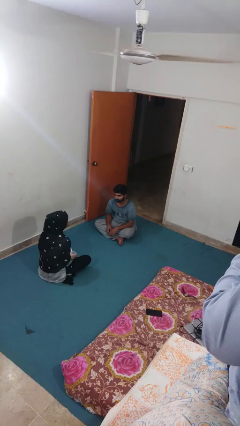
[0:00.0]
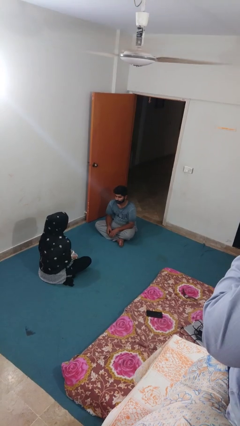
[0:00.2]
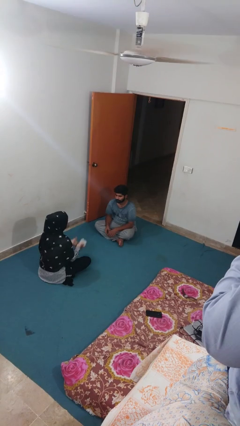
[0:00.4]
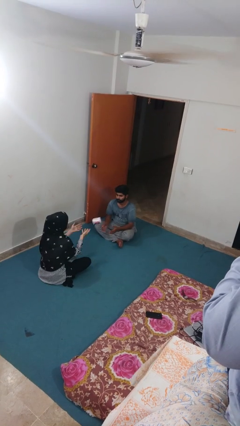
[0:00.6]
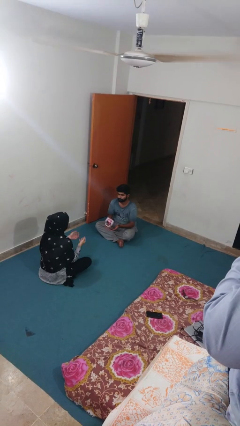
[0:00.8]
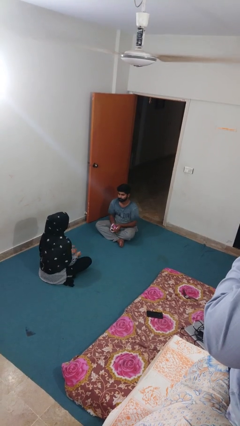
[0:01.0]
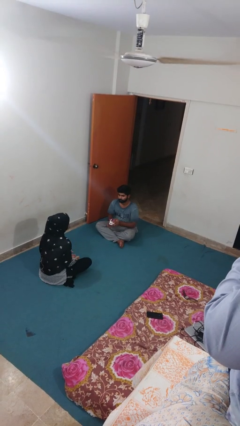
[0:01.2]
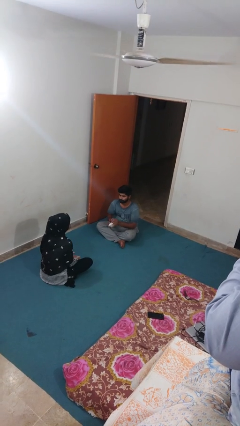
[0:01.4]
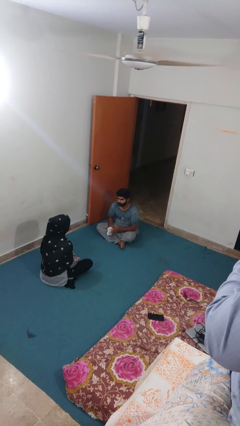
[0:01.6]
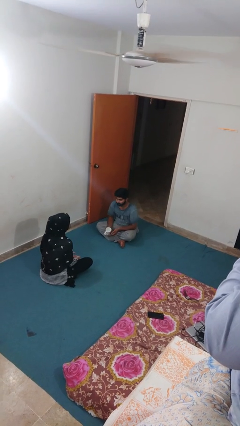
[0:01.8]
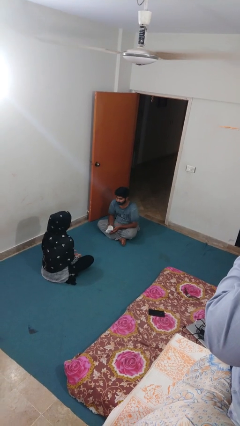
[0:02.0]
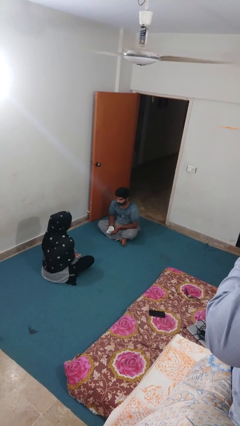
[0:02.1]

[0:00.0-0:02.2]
person catches object from person

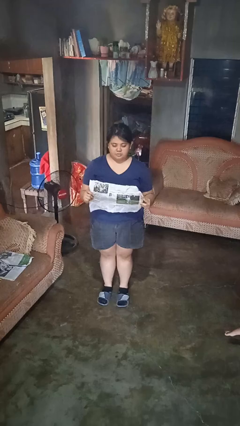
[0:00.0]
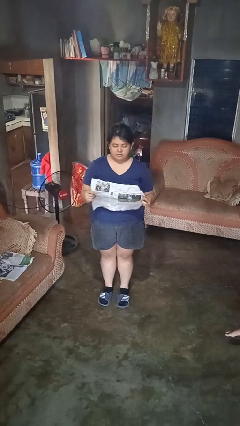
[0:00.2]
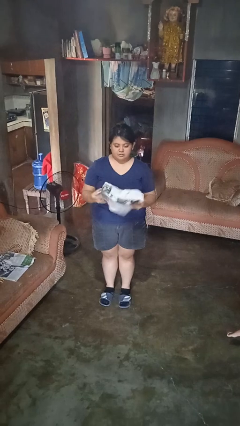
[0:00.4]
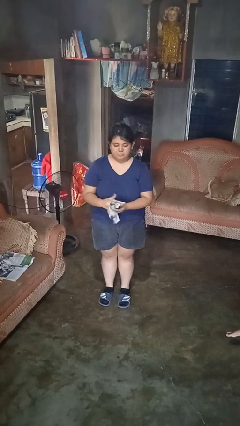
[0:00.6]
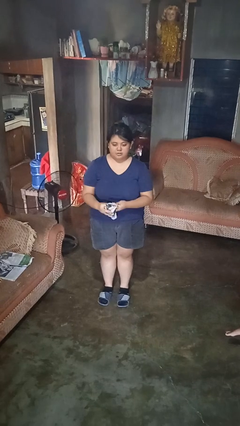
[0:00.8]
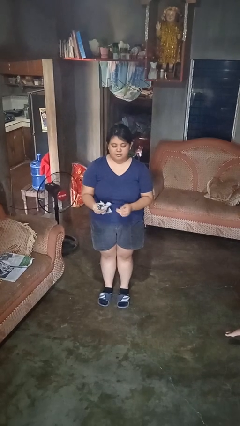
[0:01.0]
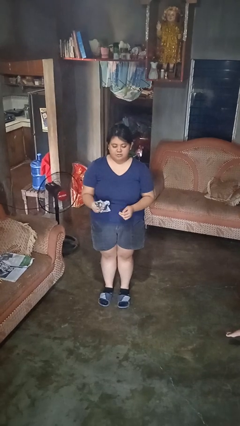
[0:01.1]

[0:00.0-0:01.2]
person crumples paper

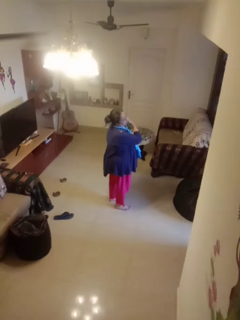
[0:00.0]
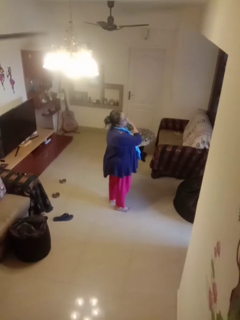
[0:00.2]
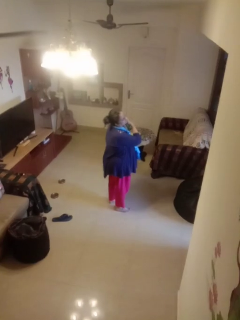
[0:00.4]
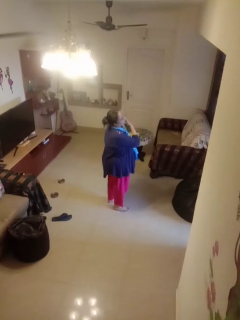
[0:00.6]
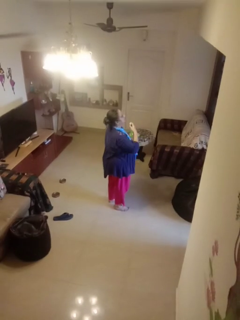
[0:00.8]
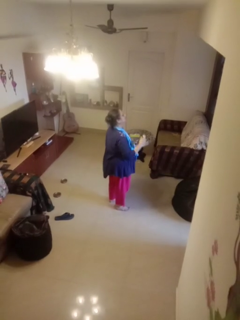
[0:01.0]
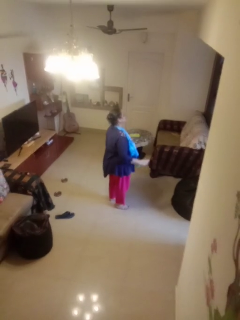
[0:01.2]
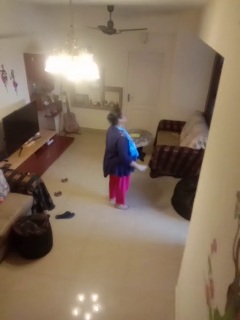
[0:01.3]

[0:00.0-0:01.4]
person applies deodorant

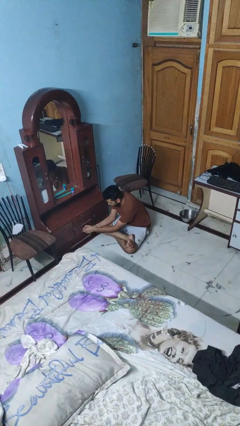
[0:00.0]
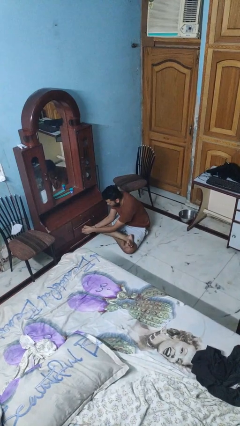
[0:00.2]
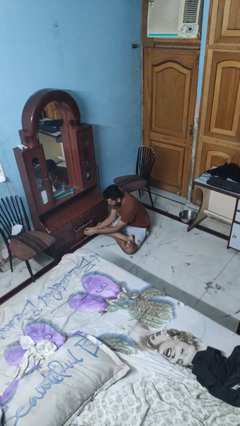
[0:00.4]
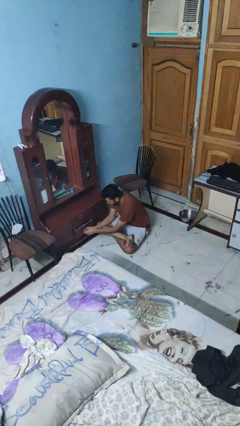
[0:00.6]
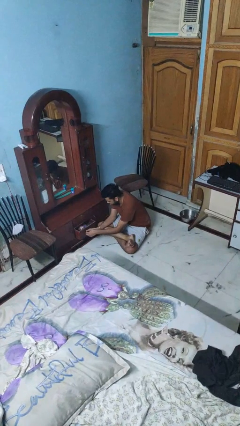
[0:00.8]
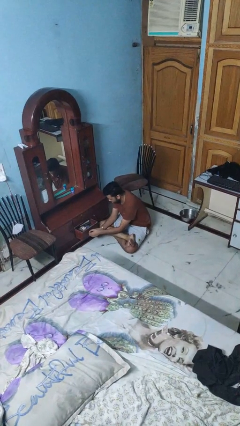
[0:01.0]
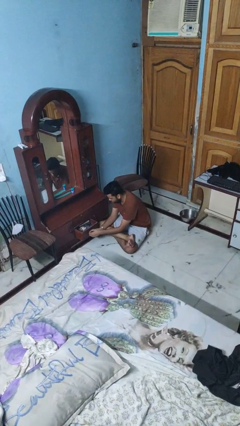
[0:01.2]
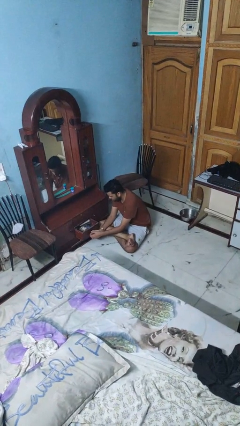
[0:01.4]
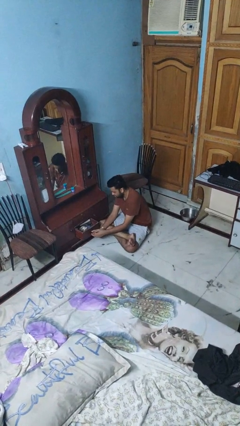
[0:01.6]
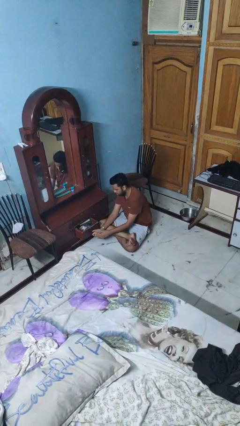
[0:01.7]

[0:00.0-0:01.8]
person opens dresser drawer

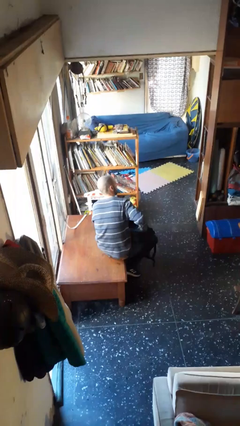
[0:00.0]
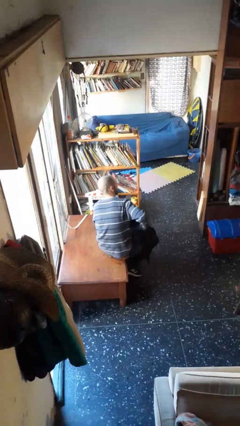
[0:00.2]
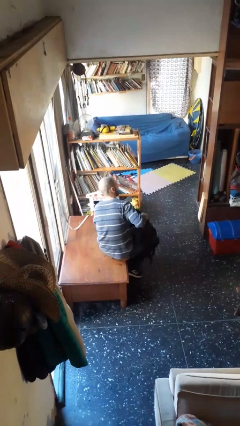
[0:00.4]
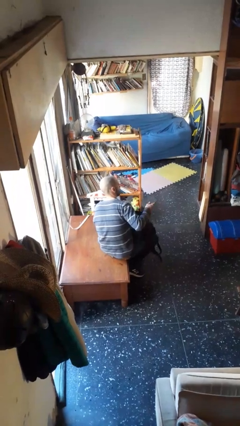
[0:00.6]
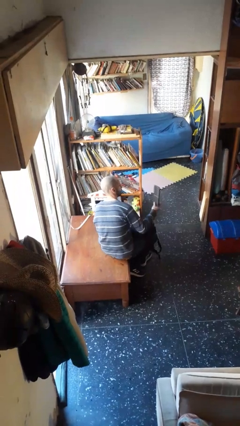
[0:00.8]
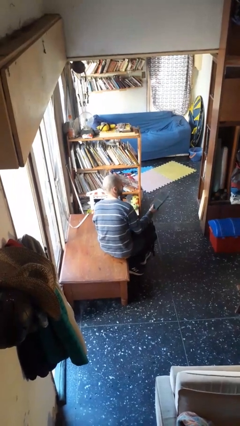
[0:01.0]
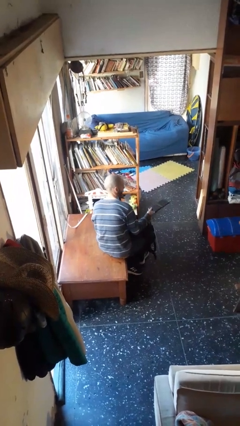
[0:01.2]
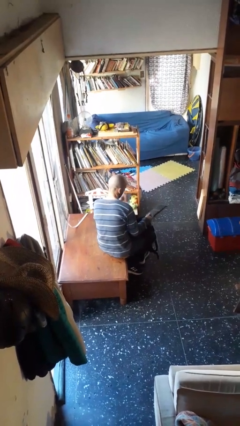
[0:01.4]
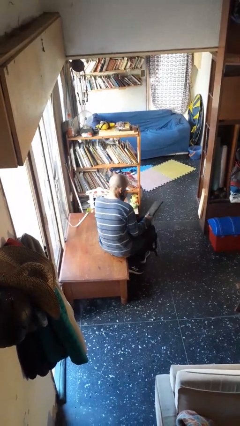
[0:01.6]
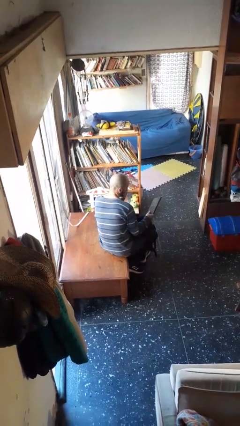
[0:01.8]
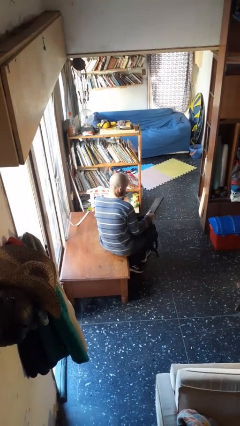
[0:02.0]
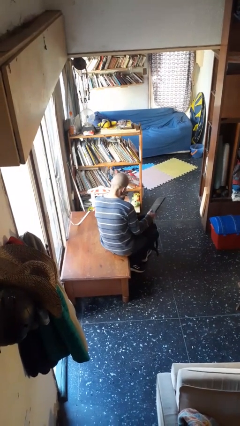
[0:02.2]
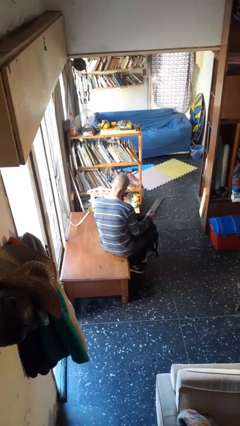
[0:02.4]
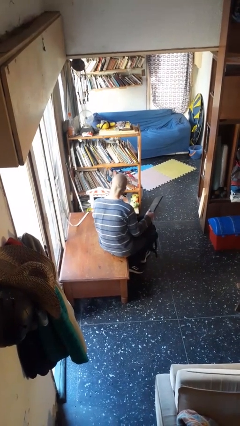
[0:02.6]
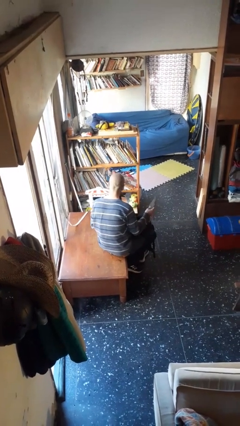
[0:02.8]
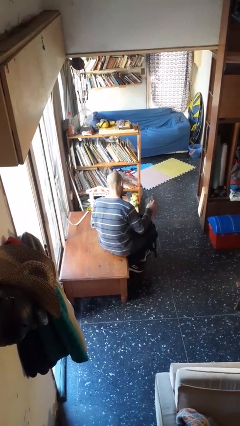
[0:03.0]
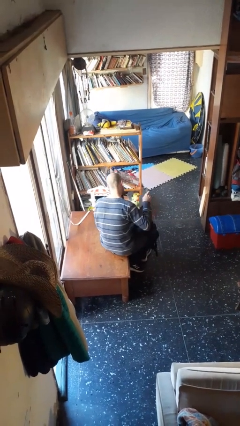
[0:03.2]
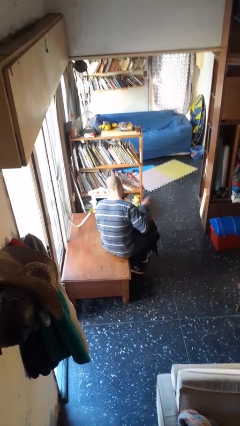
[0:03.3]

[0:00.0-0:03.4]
person takes object from backpack

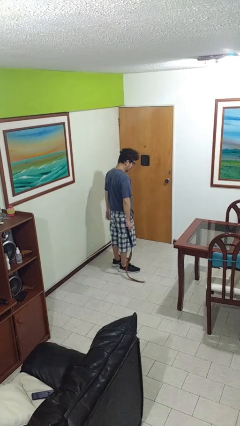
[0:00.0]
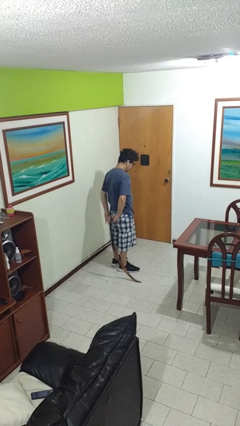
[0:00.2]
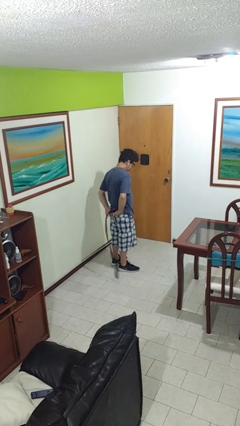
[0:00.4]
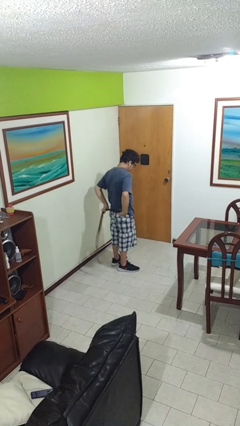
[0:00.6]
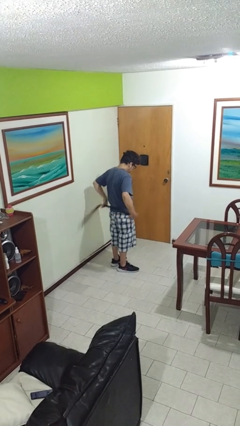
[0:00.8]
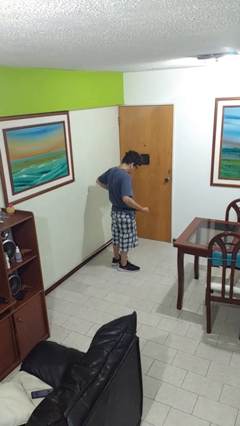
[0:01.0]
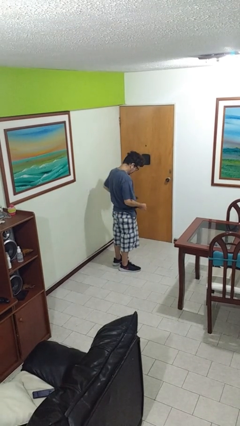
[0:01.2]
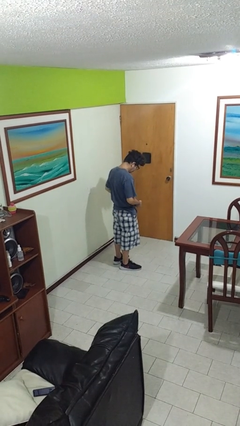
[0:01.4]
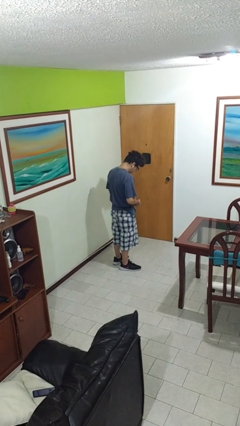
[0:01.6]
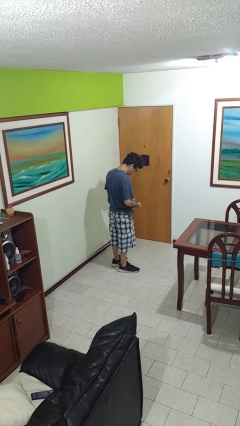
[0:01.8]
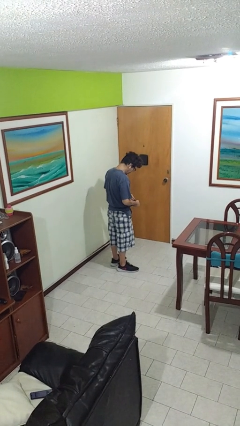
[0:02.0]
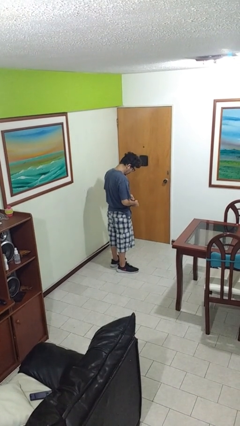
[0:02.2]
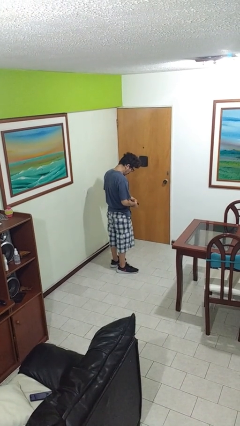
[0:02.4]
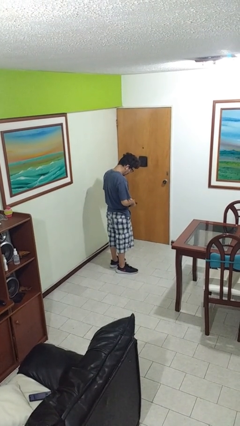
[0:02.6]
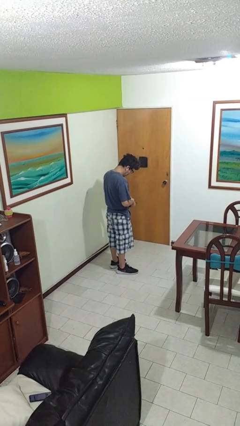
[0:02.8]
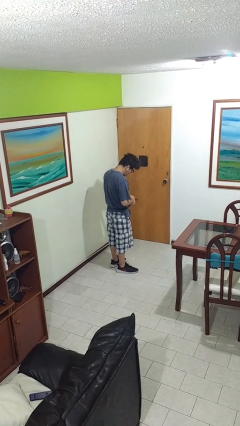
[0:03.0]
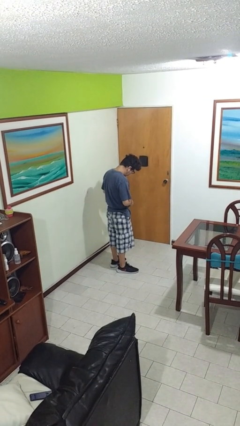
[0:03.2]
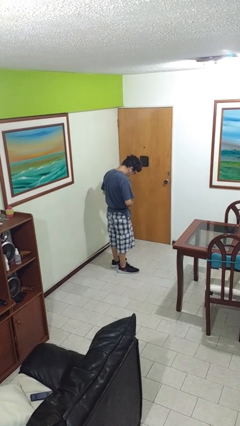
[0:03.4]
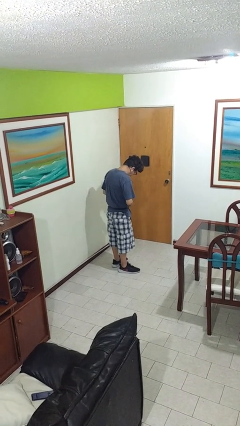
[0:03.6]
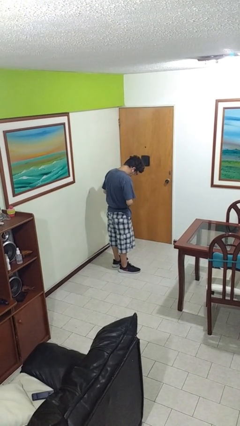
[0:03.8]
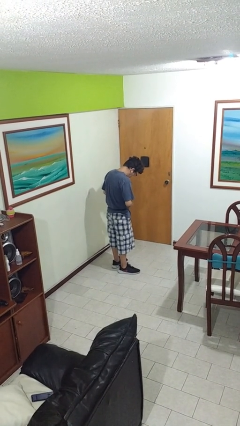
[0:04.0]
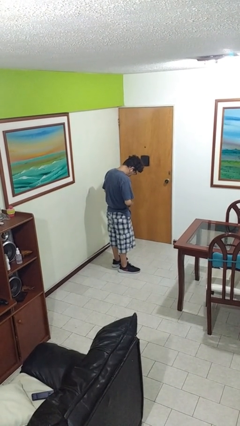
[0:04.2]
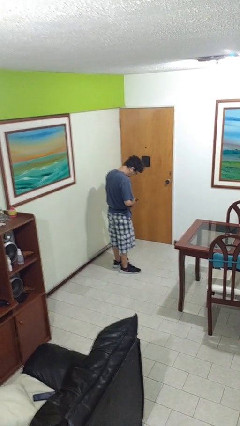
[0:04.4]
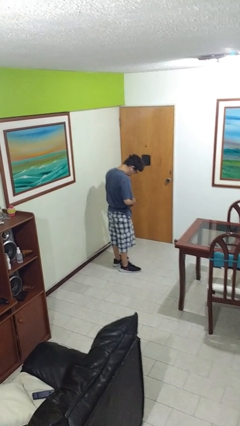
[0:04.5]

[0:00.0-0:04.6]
person puts on belt

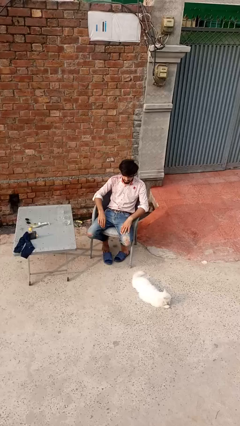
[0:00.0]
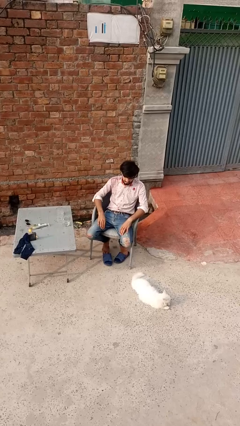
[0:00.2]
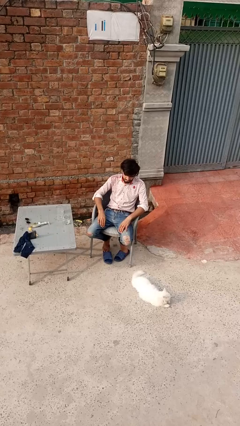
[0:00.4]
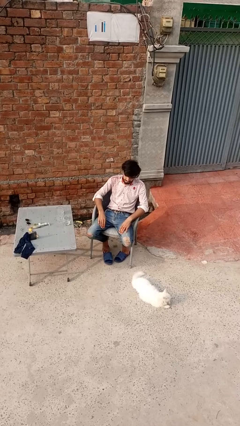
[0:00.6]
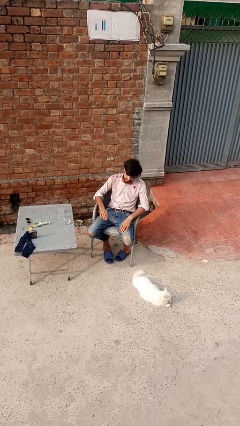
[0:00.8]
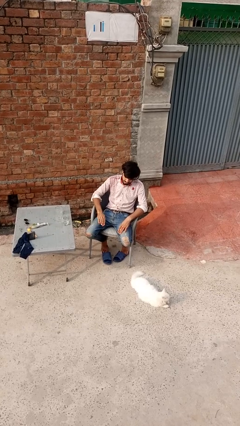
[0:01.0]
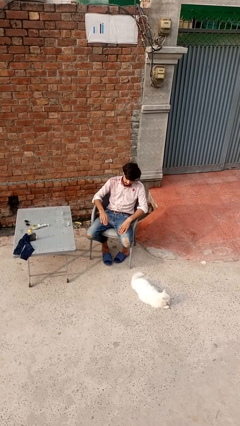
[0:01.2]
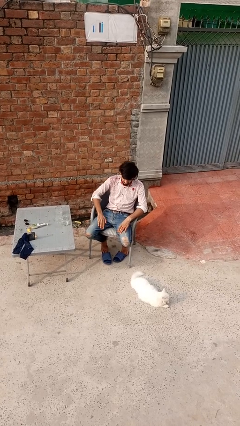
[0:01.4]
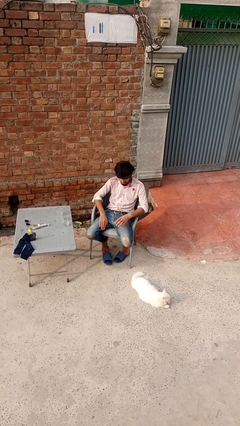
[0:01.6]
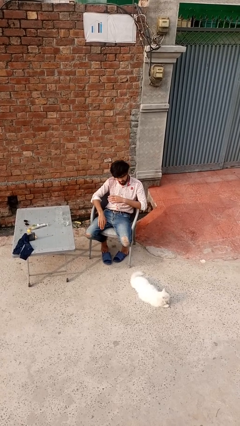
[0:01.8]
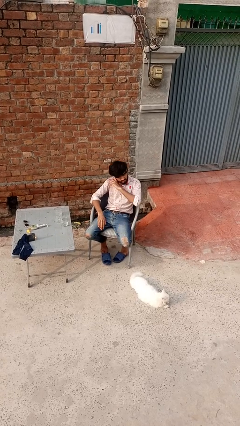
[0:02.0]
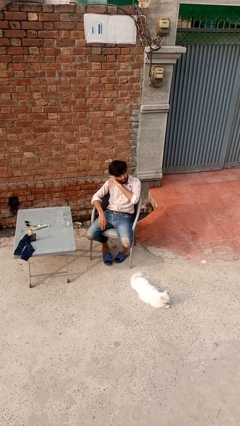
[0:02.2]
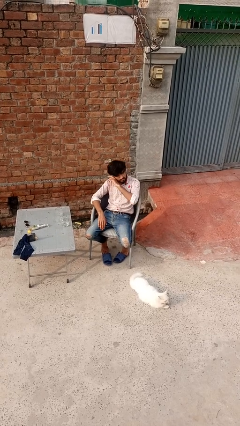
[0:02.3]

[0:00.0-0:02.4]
person slaps hands on thighs

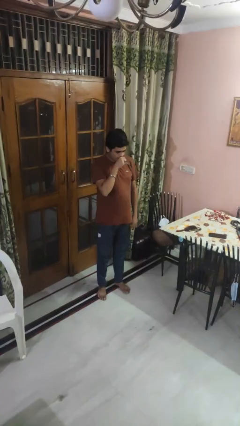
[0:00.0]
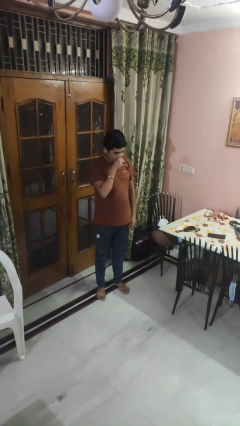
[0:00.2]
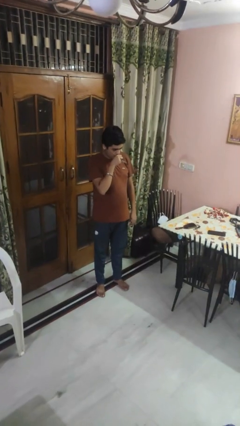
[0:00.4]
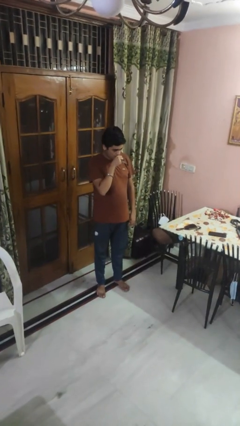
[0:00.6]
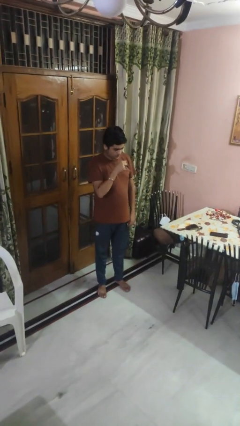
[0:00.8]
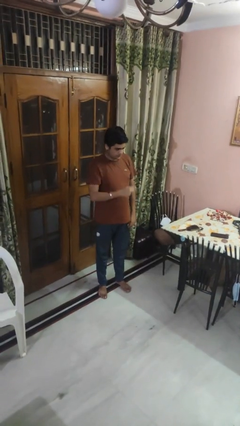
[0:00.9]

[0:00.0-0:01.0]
person vapes
